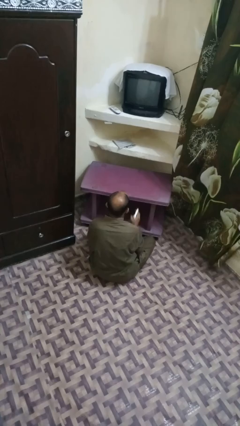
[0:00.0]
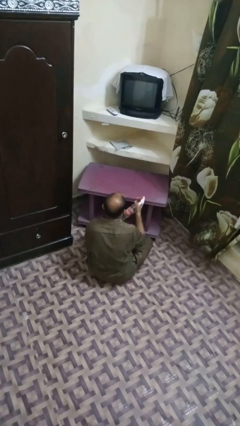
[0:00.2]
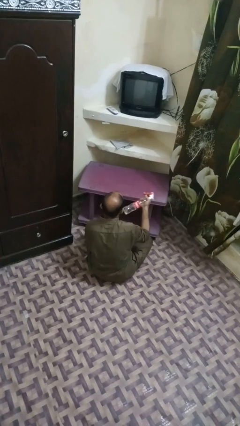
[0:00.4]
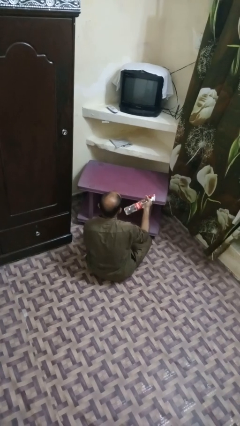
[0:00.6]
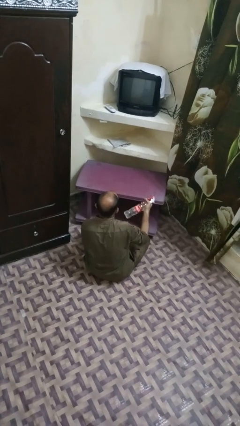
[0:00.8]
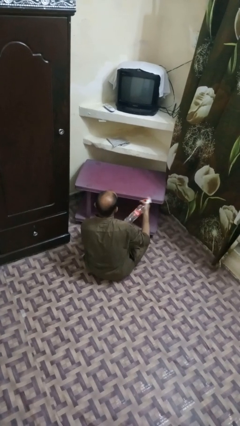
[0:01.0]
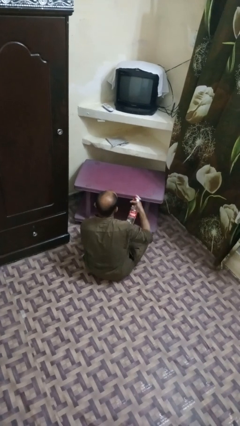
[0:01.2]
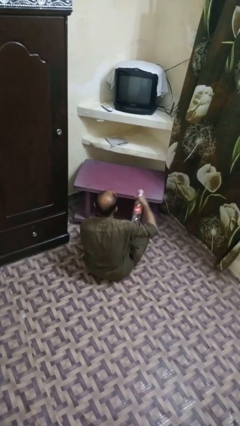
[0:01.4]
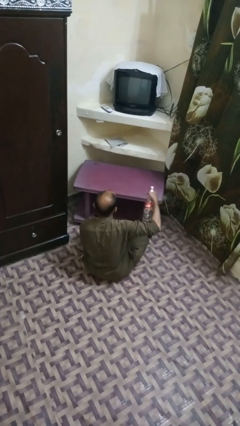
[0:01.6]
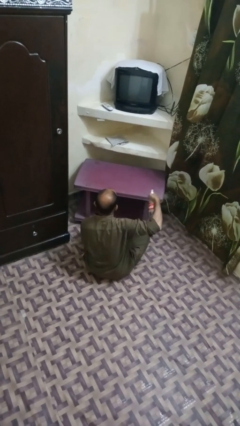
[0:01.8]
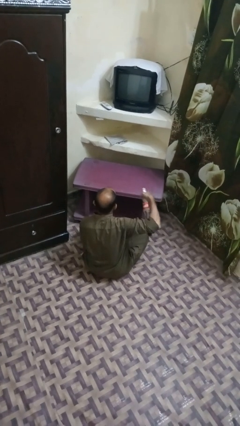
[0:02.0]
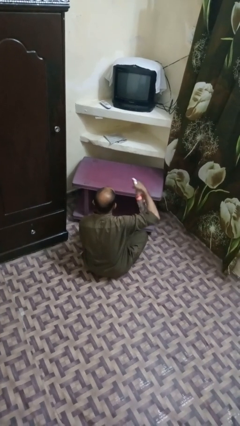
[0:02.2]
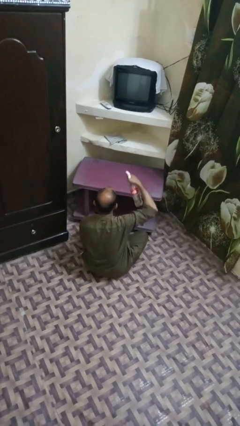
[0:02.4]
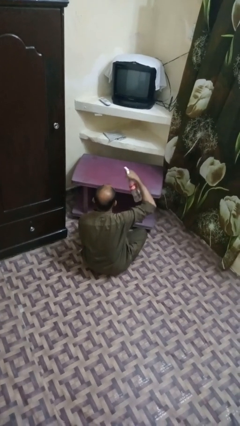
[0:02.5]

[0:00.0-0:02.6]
person sprays from bottle

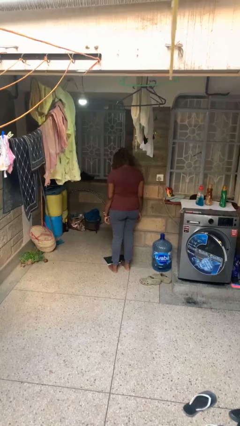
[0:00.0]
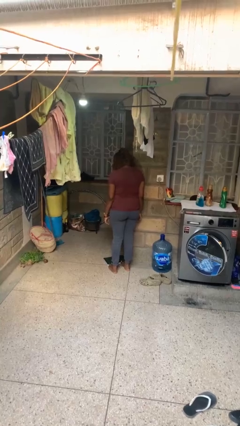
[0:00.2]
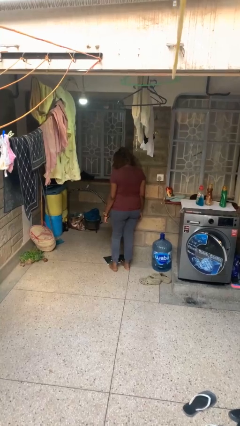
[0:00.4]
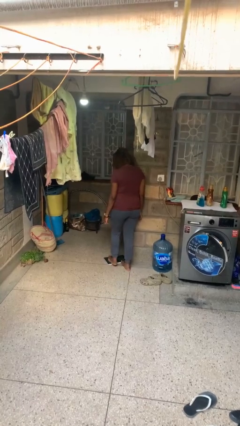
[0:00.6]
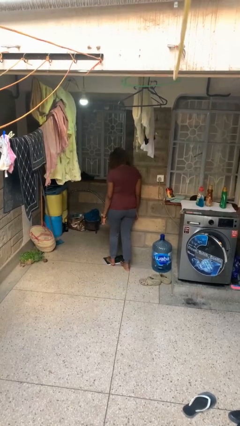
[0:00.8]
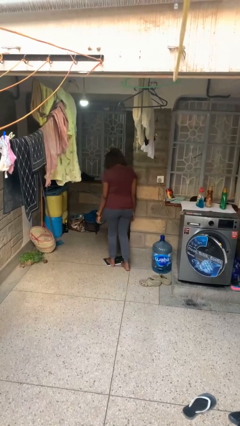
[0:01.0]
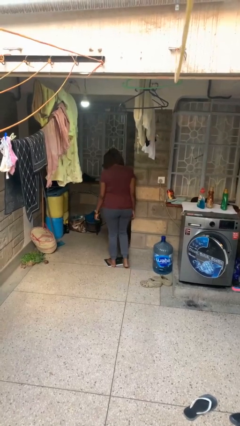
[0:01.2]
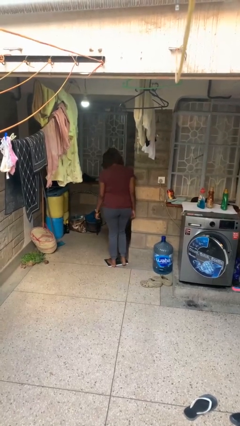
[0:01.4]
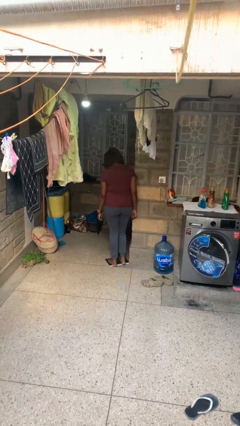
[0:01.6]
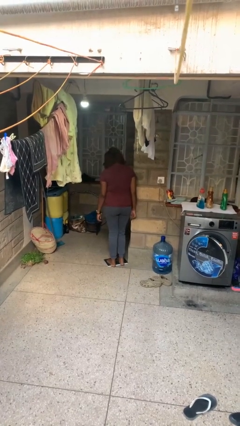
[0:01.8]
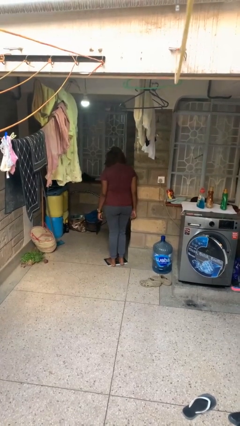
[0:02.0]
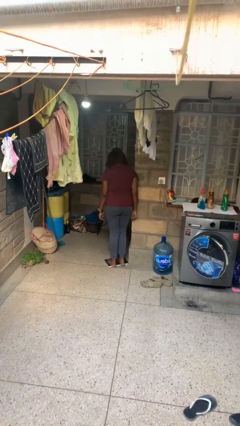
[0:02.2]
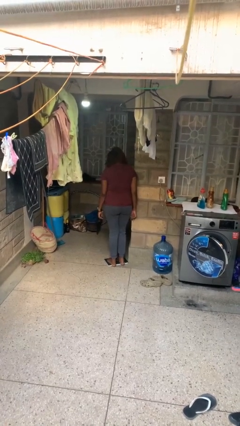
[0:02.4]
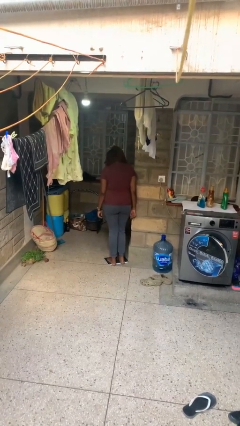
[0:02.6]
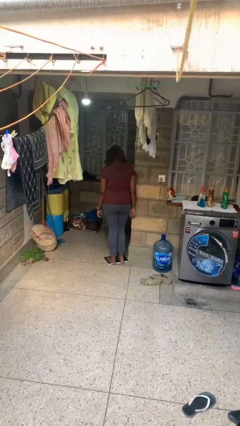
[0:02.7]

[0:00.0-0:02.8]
person uses bodyweight scale

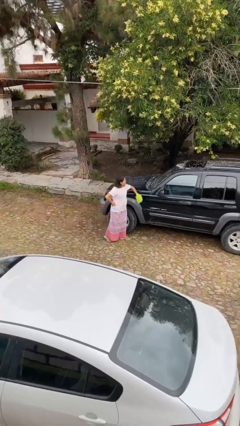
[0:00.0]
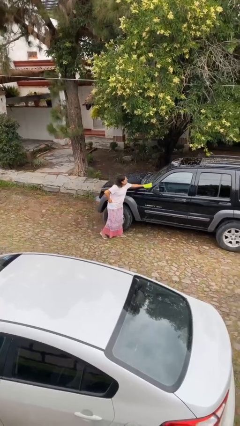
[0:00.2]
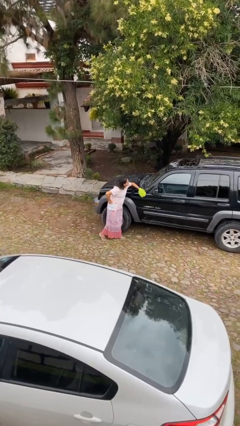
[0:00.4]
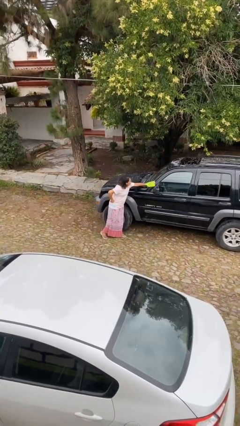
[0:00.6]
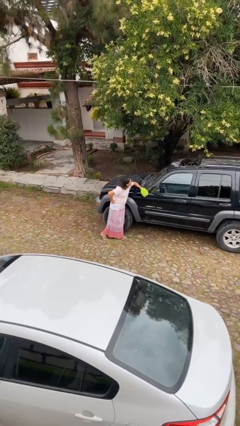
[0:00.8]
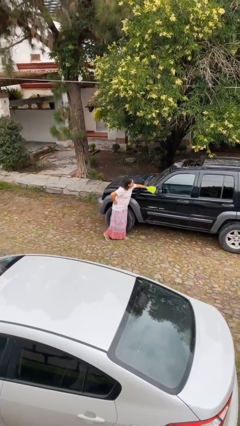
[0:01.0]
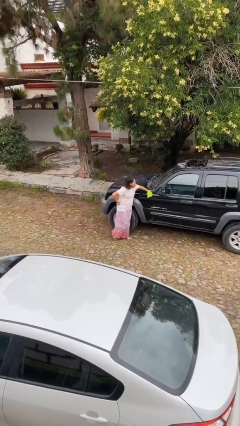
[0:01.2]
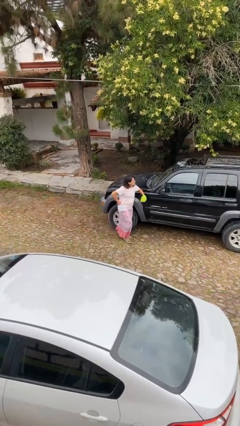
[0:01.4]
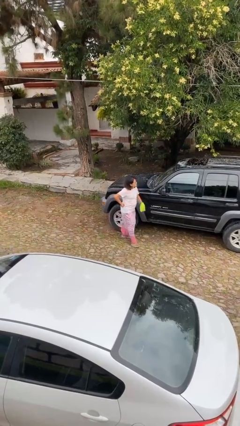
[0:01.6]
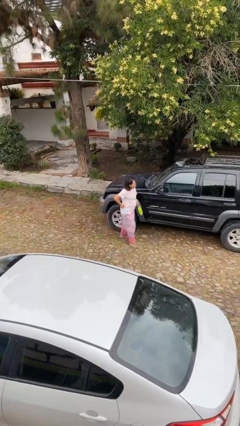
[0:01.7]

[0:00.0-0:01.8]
person polishes car with rag

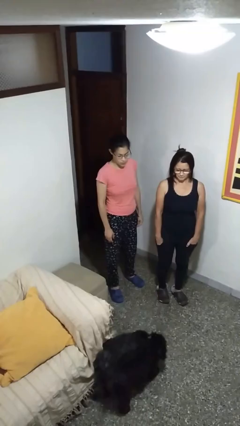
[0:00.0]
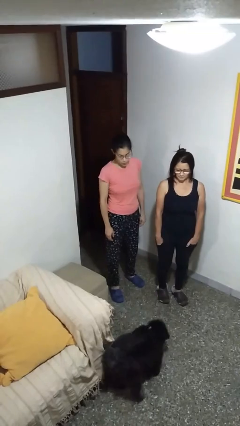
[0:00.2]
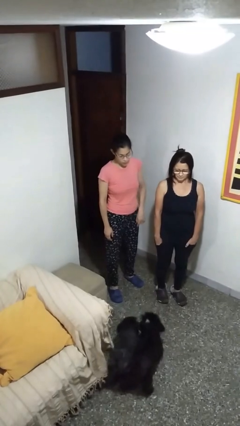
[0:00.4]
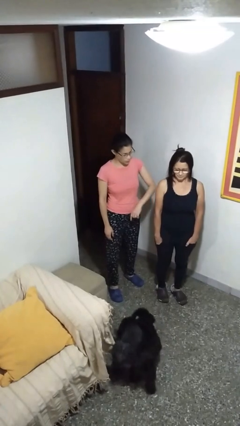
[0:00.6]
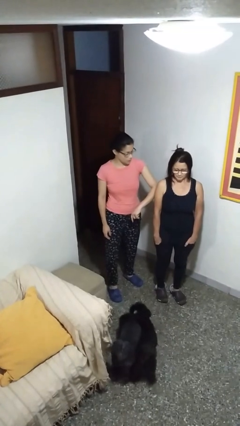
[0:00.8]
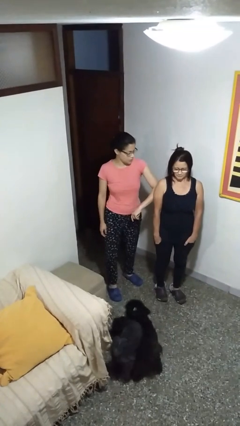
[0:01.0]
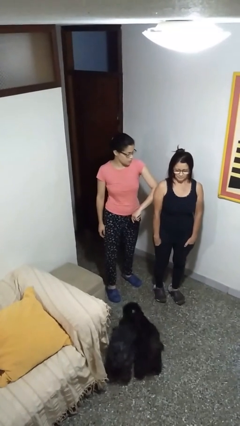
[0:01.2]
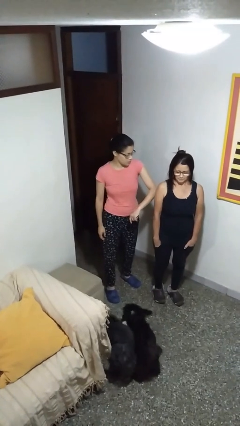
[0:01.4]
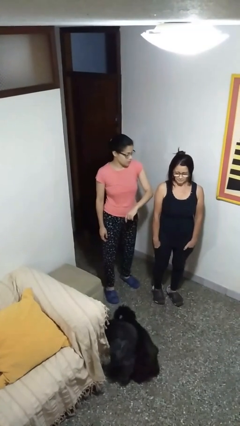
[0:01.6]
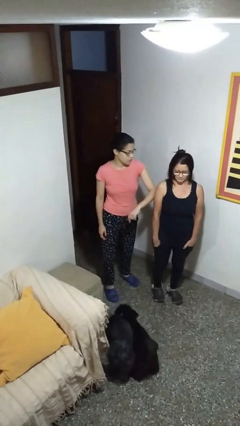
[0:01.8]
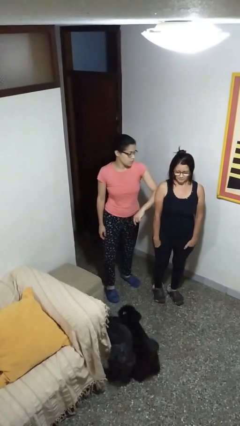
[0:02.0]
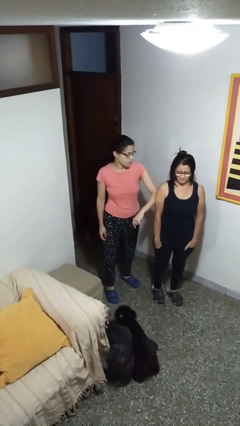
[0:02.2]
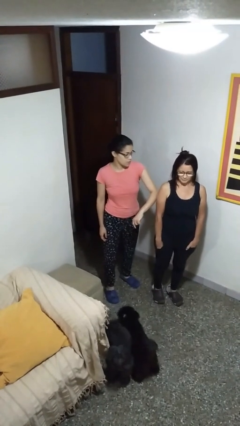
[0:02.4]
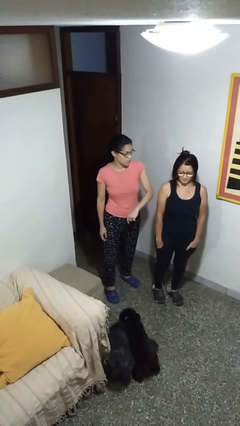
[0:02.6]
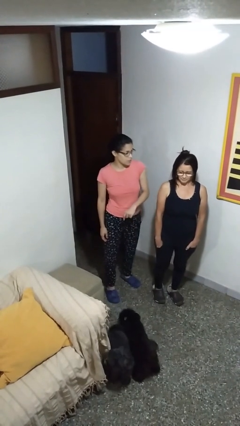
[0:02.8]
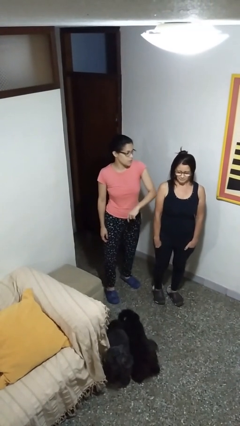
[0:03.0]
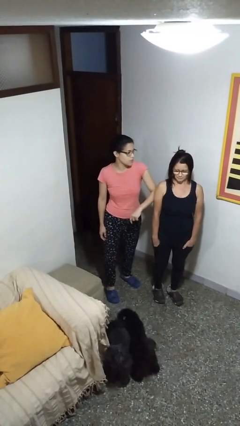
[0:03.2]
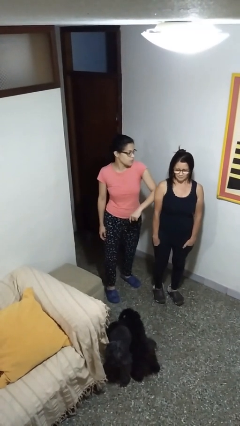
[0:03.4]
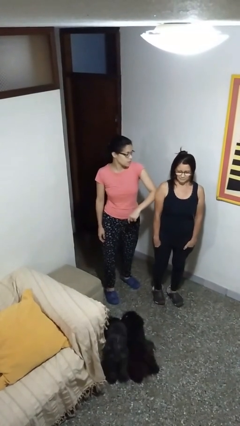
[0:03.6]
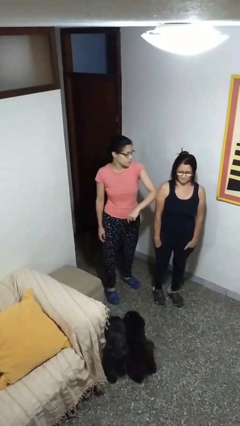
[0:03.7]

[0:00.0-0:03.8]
person nudges person with elbow

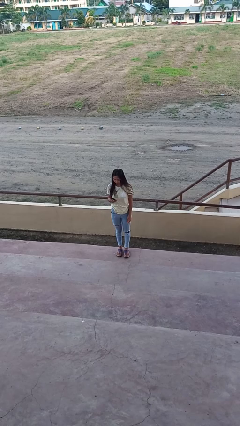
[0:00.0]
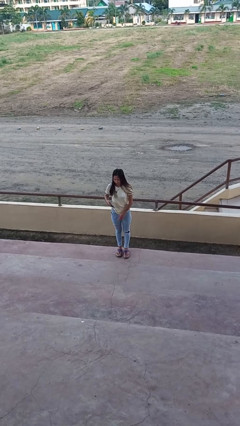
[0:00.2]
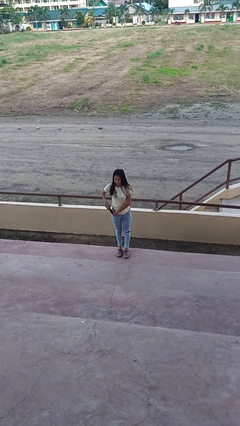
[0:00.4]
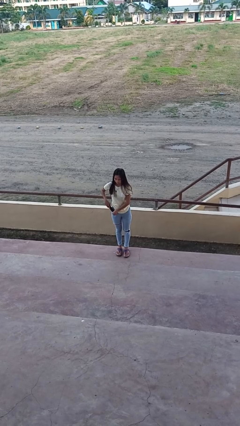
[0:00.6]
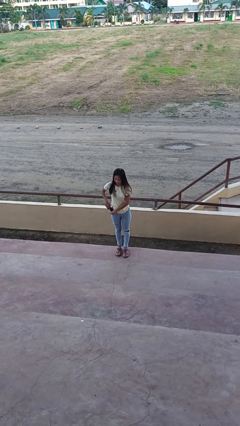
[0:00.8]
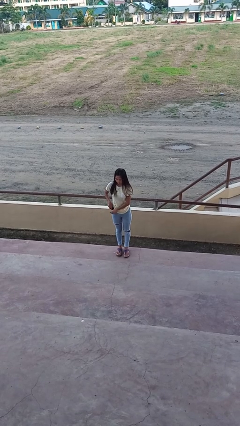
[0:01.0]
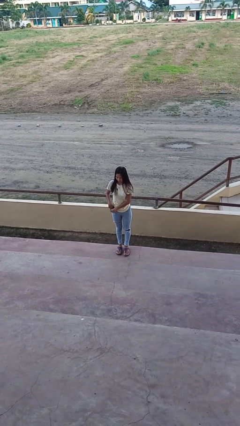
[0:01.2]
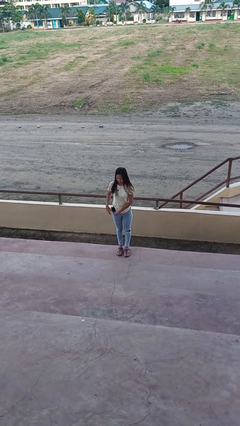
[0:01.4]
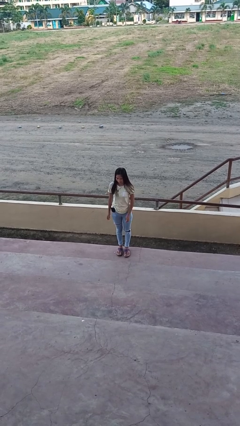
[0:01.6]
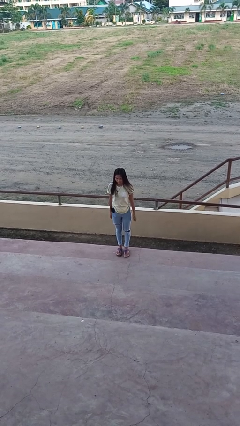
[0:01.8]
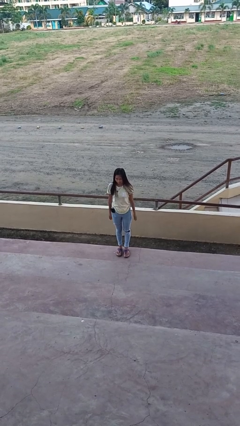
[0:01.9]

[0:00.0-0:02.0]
person puts phone into pocket

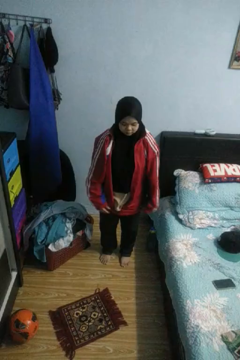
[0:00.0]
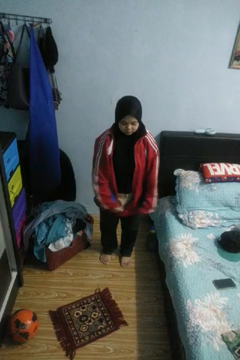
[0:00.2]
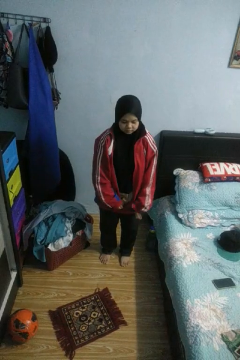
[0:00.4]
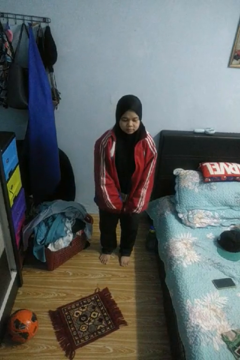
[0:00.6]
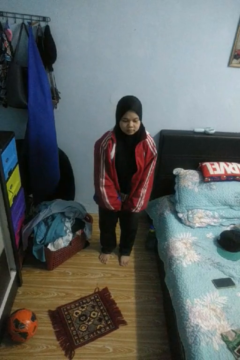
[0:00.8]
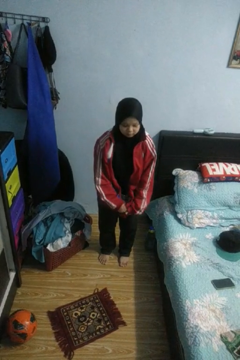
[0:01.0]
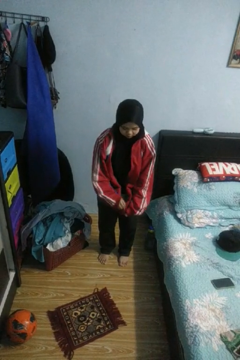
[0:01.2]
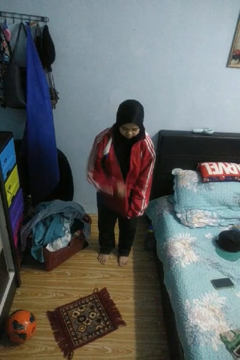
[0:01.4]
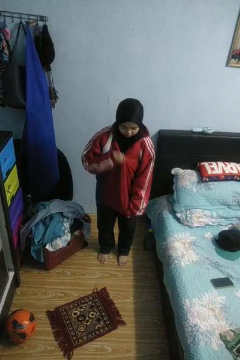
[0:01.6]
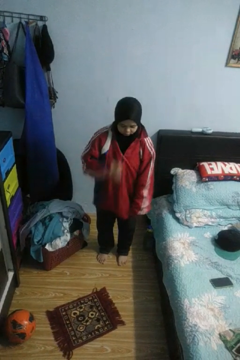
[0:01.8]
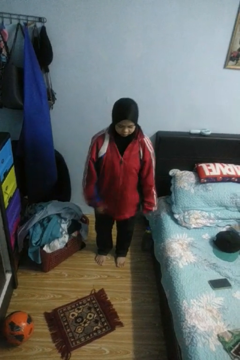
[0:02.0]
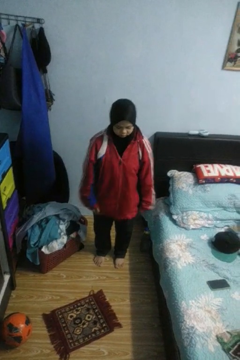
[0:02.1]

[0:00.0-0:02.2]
person zips up jacket

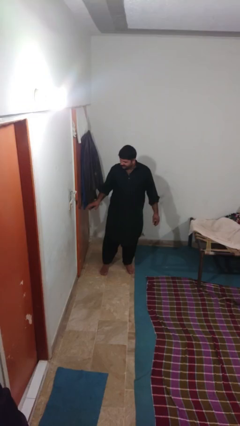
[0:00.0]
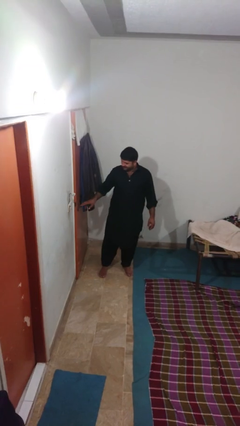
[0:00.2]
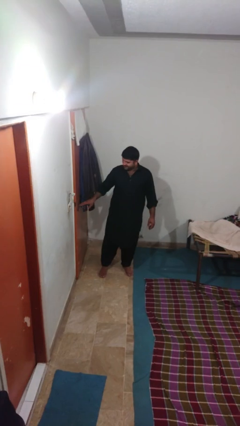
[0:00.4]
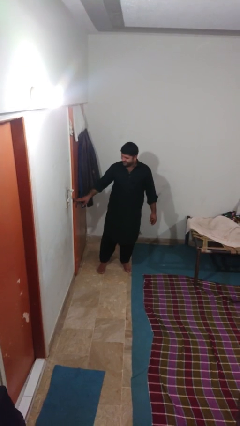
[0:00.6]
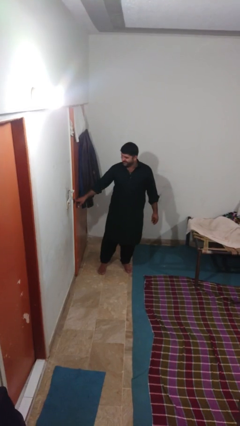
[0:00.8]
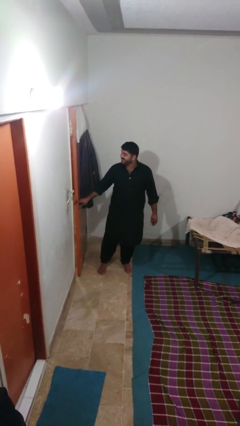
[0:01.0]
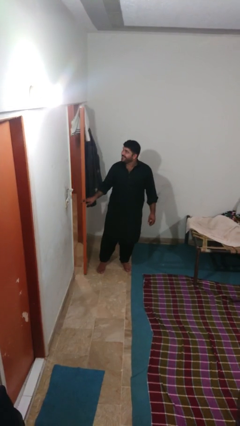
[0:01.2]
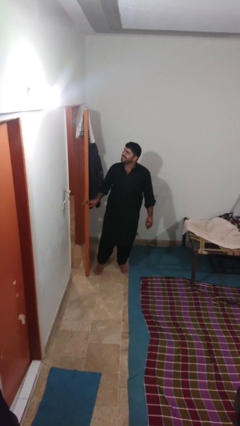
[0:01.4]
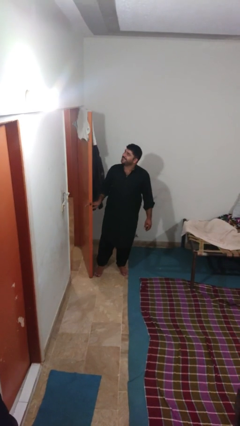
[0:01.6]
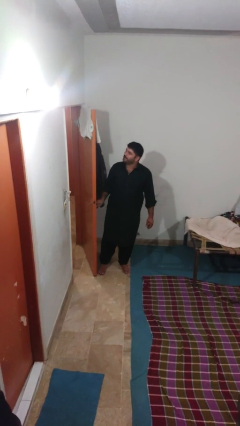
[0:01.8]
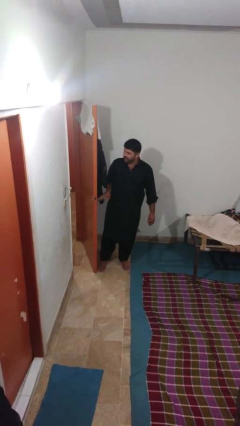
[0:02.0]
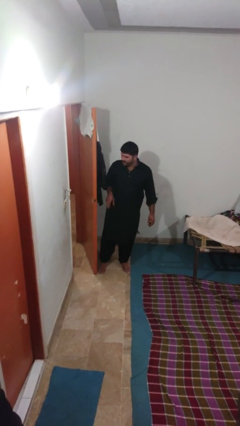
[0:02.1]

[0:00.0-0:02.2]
person opens facility door

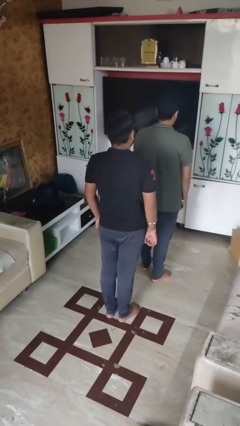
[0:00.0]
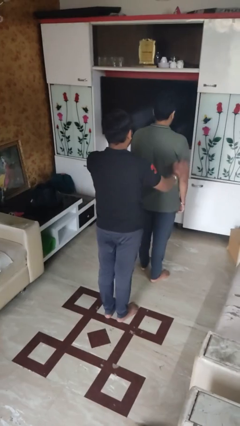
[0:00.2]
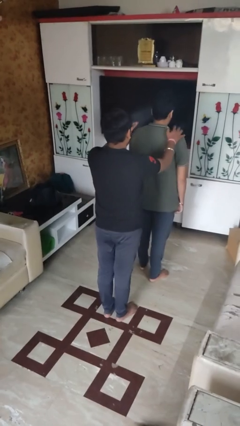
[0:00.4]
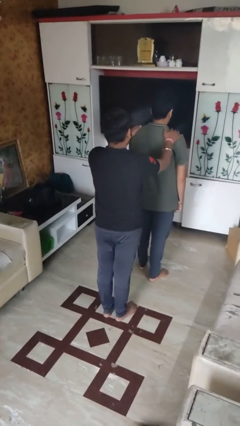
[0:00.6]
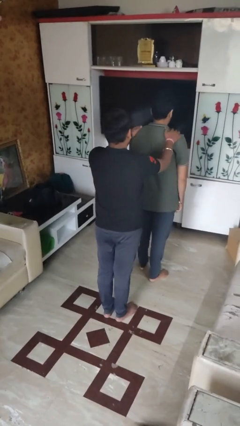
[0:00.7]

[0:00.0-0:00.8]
person grabs person by shoulder
